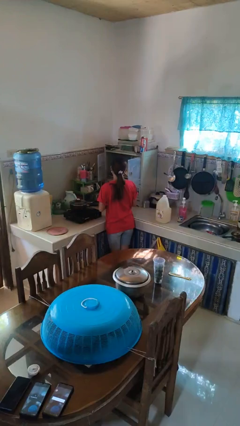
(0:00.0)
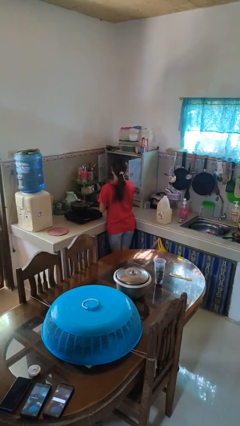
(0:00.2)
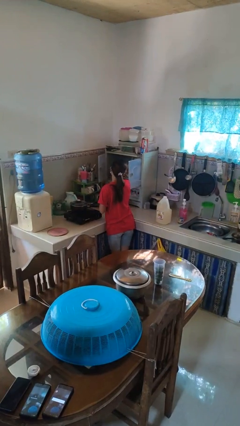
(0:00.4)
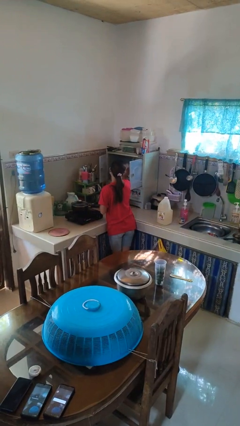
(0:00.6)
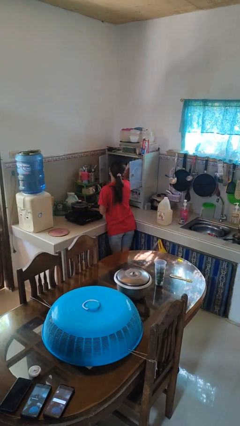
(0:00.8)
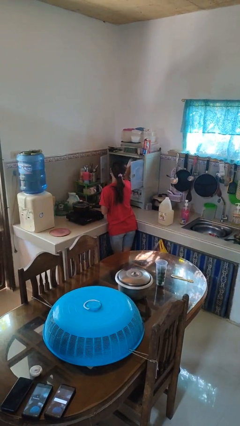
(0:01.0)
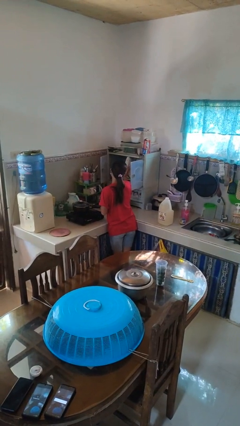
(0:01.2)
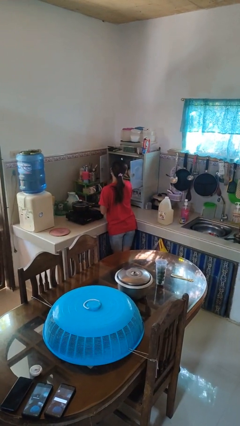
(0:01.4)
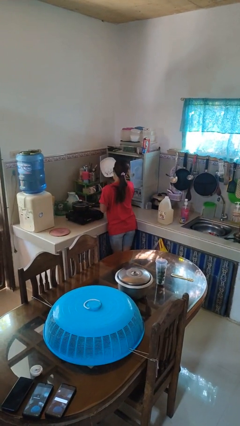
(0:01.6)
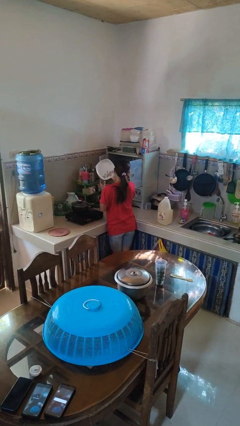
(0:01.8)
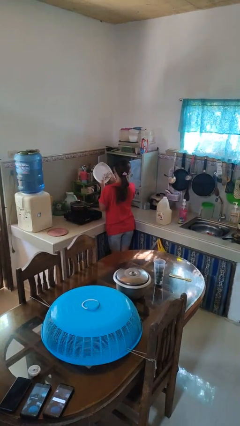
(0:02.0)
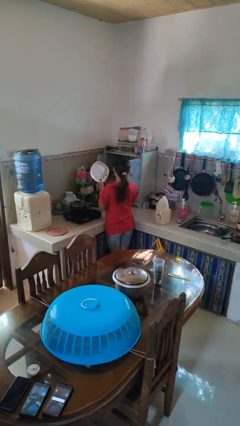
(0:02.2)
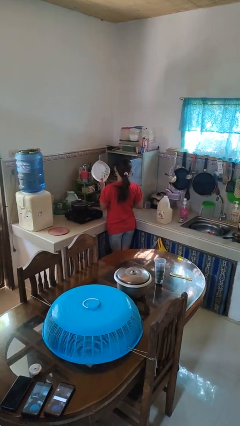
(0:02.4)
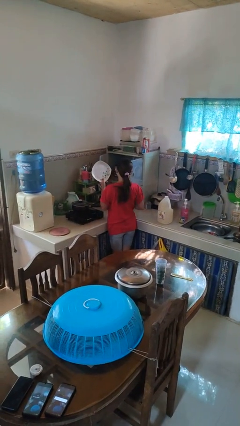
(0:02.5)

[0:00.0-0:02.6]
person takes object from cabinet

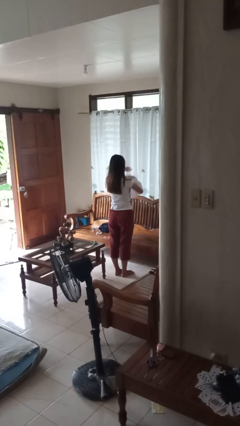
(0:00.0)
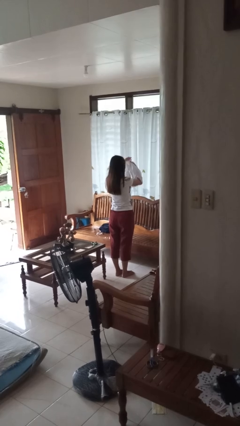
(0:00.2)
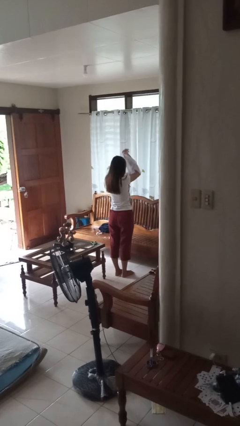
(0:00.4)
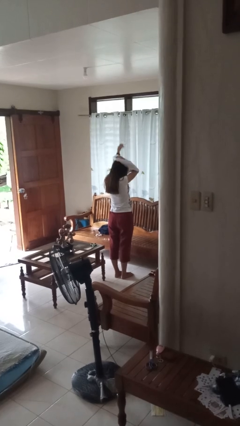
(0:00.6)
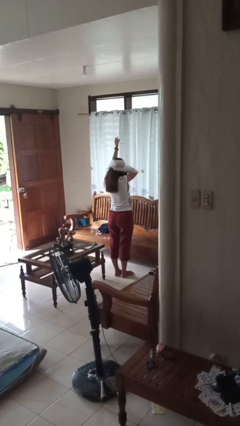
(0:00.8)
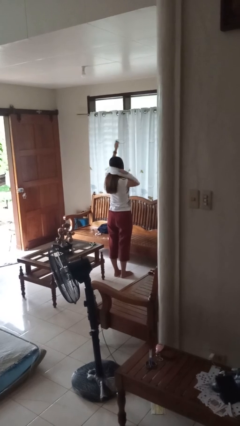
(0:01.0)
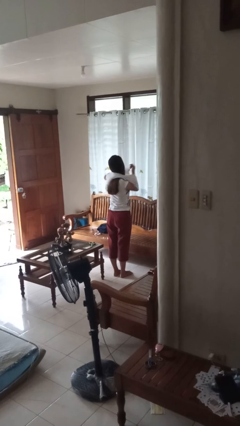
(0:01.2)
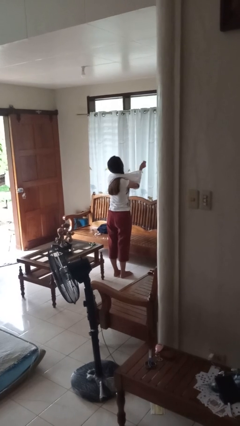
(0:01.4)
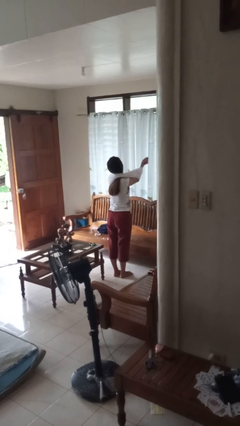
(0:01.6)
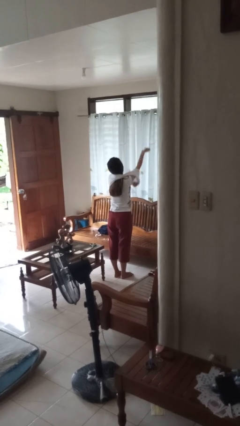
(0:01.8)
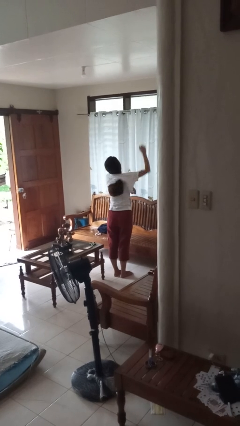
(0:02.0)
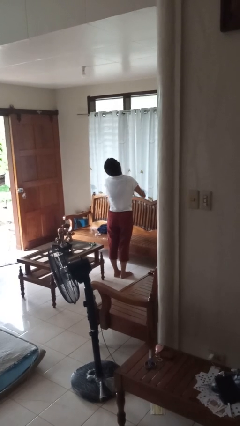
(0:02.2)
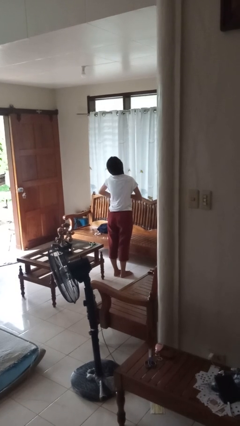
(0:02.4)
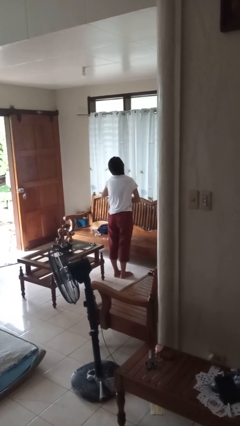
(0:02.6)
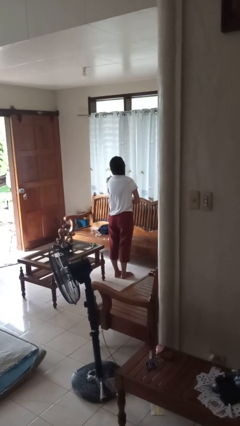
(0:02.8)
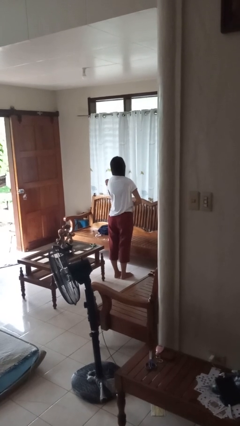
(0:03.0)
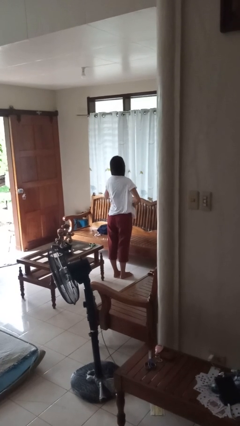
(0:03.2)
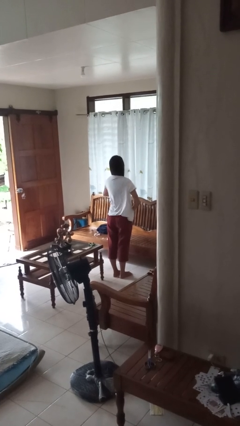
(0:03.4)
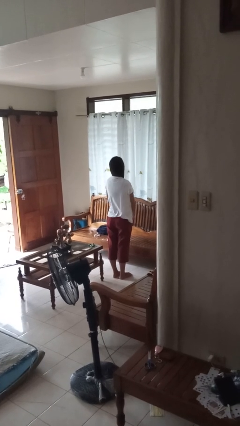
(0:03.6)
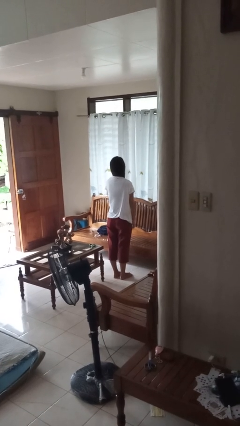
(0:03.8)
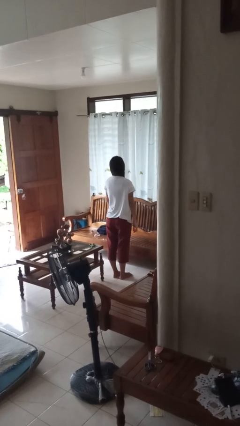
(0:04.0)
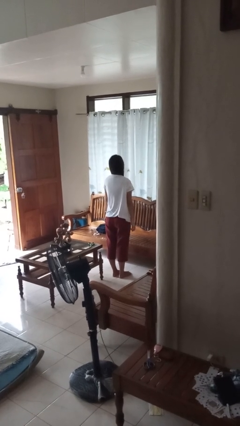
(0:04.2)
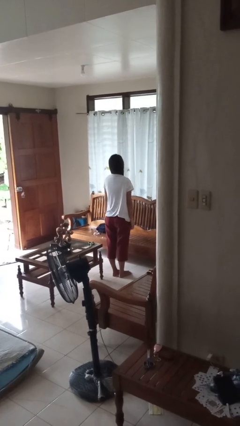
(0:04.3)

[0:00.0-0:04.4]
person puts on shirt

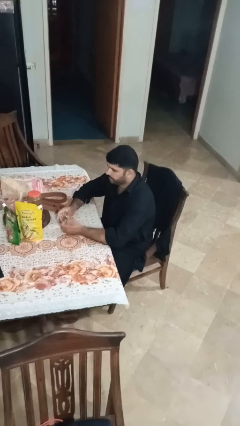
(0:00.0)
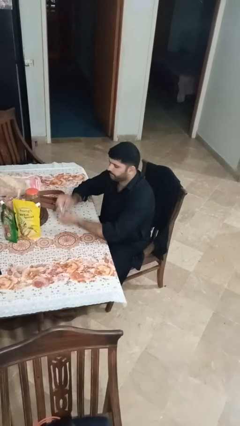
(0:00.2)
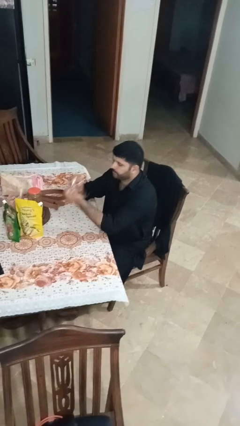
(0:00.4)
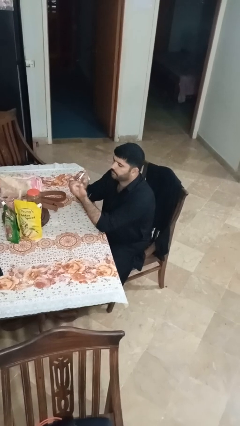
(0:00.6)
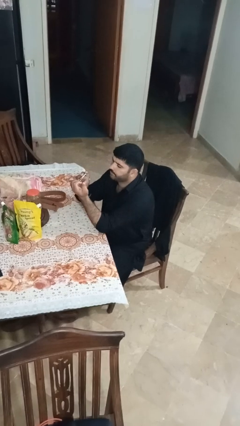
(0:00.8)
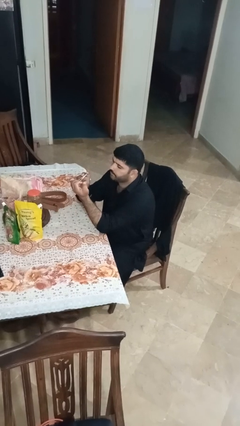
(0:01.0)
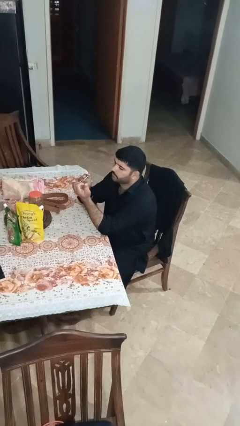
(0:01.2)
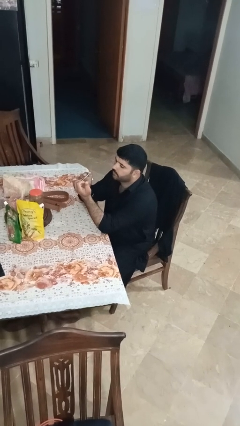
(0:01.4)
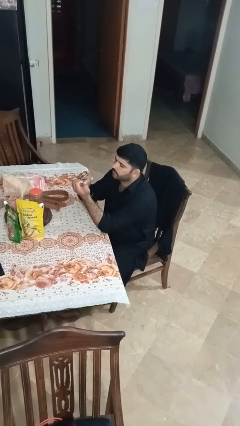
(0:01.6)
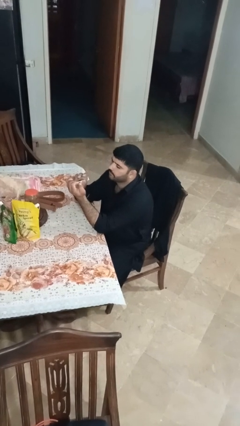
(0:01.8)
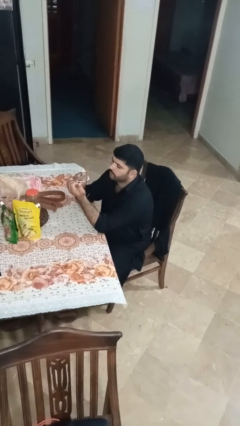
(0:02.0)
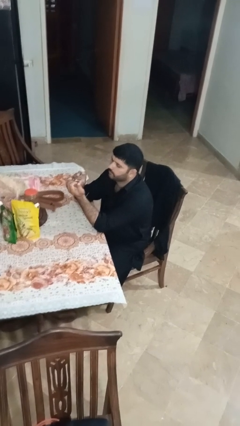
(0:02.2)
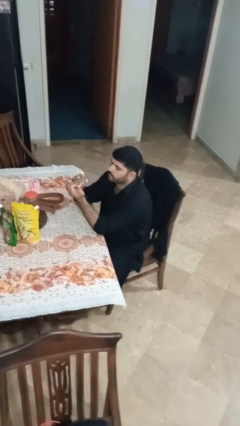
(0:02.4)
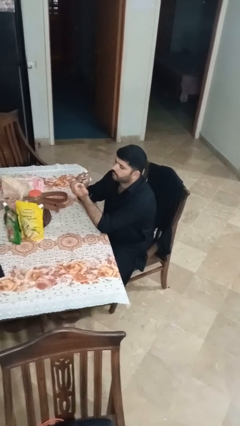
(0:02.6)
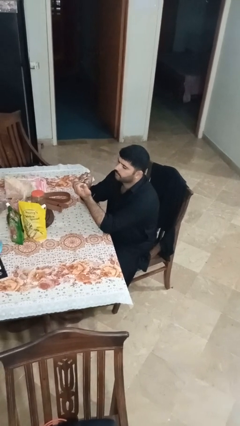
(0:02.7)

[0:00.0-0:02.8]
person clips fingernails

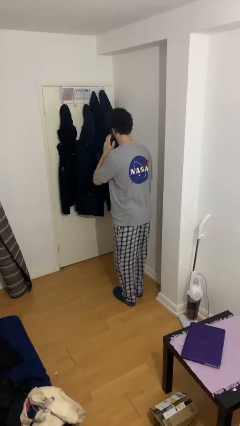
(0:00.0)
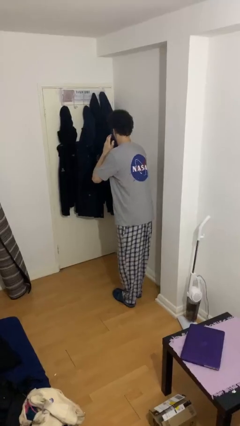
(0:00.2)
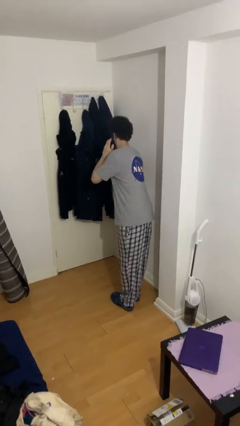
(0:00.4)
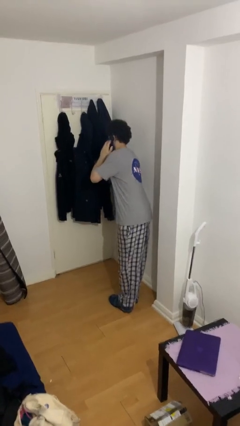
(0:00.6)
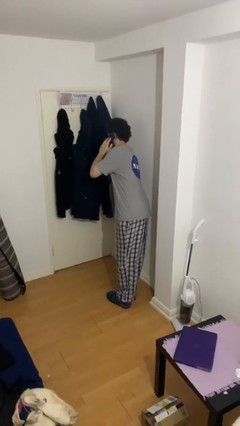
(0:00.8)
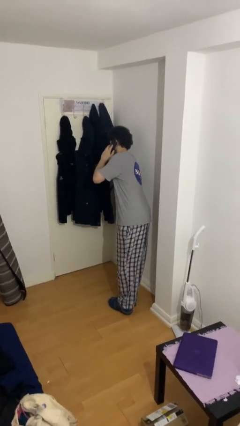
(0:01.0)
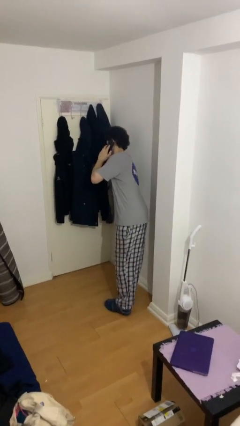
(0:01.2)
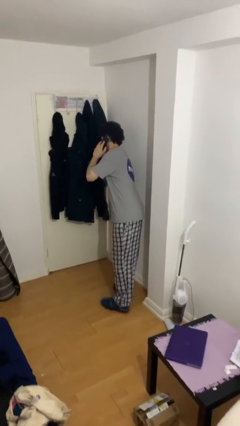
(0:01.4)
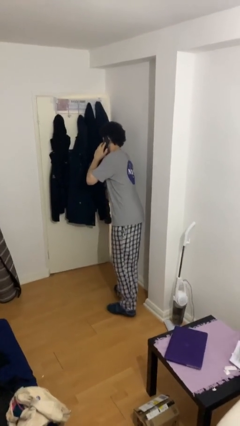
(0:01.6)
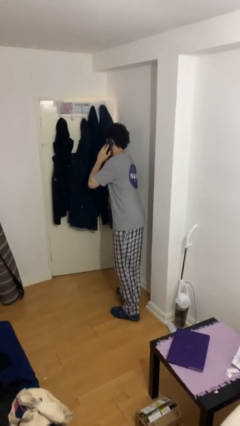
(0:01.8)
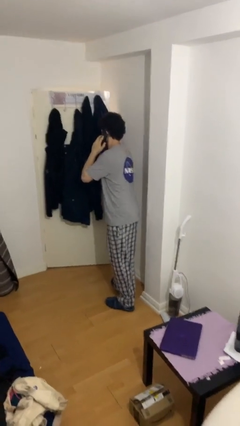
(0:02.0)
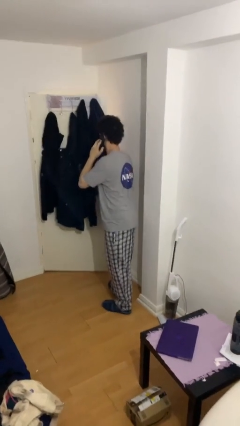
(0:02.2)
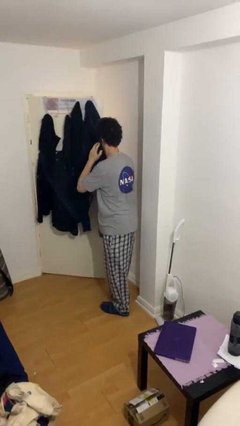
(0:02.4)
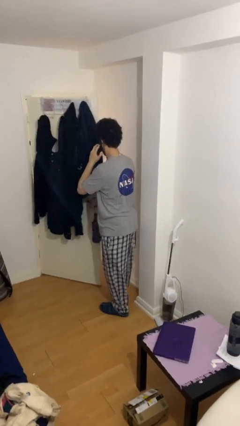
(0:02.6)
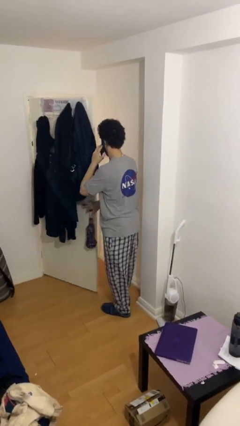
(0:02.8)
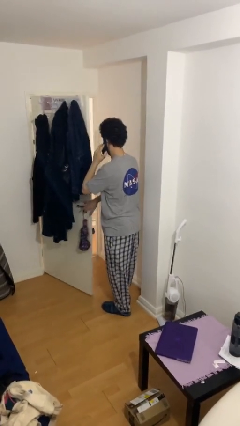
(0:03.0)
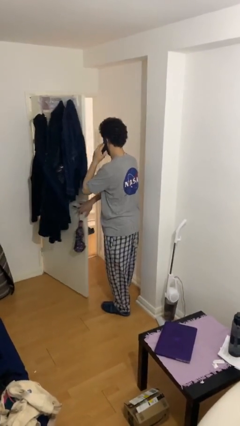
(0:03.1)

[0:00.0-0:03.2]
person opens facility door

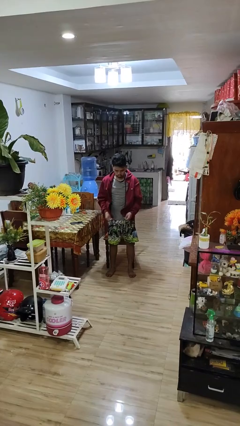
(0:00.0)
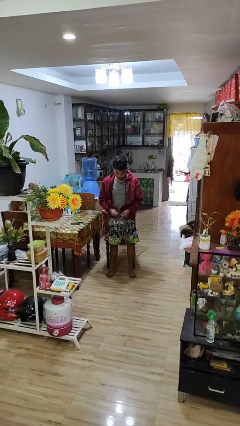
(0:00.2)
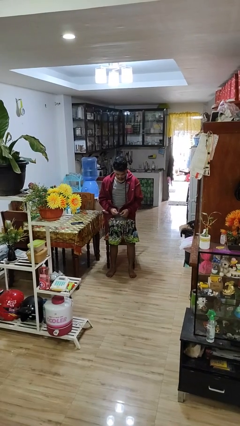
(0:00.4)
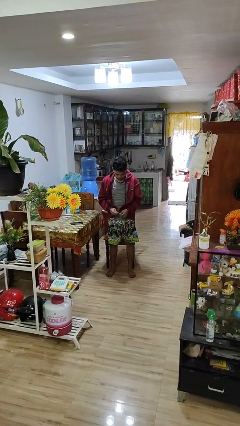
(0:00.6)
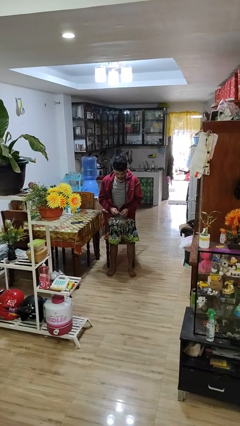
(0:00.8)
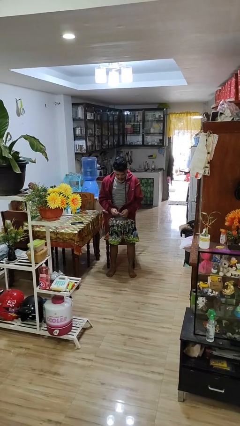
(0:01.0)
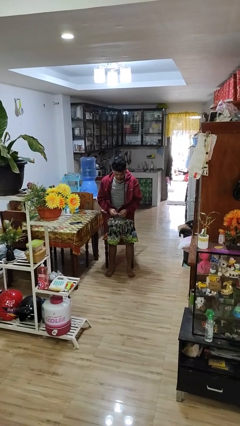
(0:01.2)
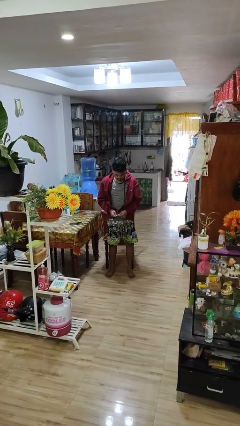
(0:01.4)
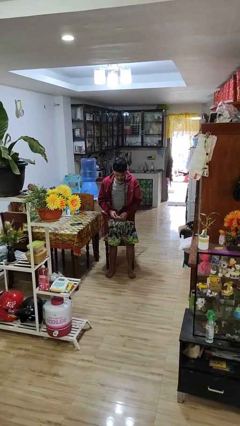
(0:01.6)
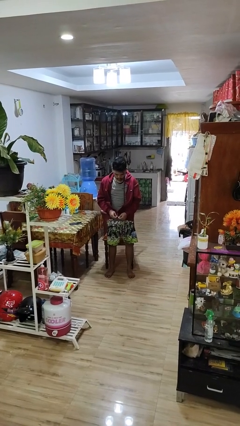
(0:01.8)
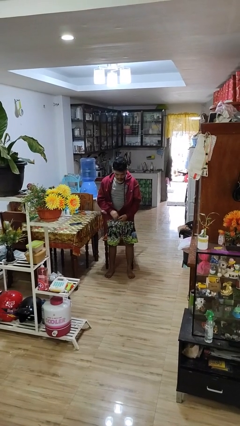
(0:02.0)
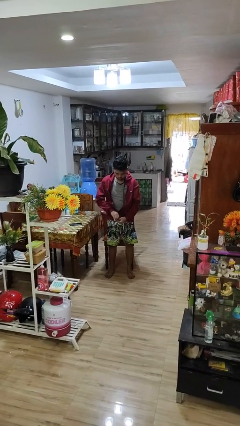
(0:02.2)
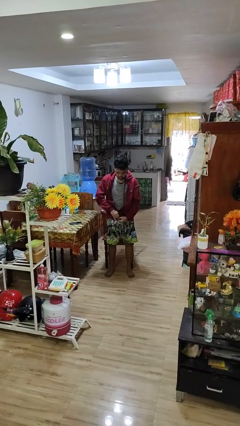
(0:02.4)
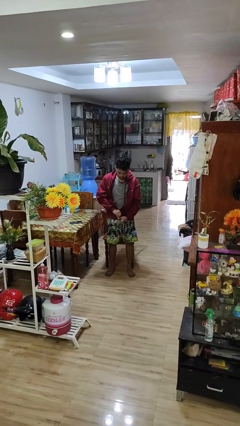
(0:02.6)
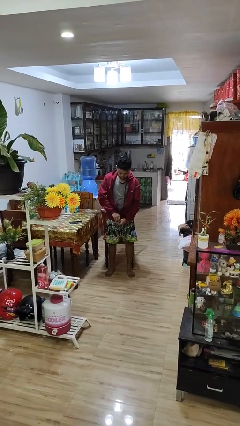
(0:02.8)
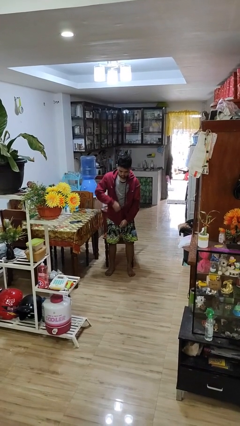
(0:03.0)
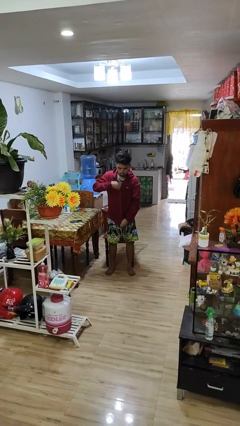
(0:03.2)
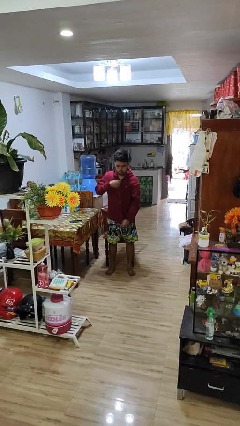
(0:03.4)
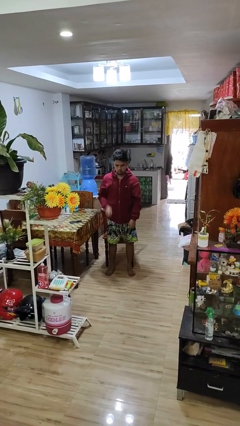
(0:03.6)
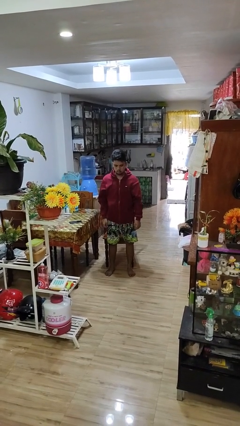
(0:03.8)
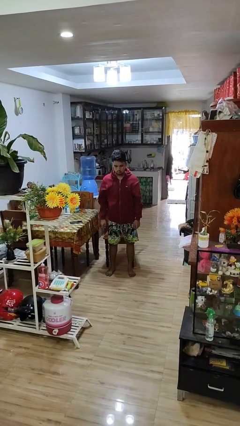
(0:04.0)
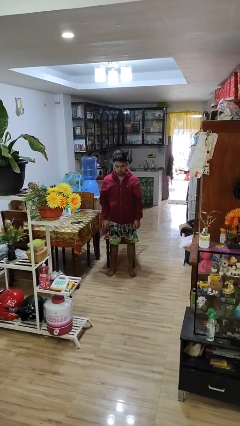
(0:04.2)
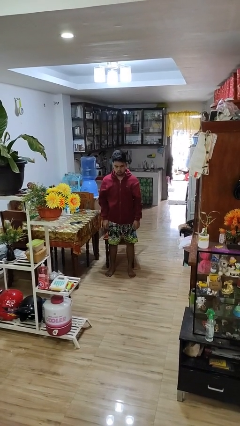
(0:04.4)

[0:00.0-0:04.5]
person zips up jacket

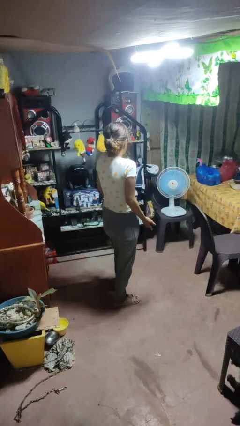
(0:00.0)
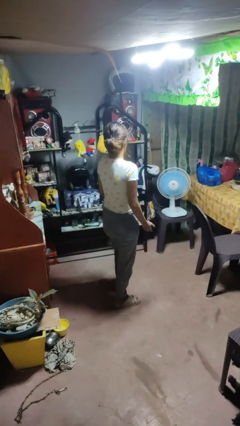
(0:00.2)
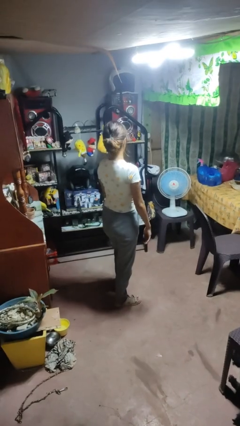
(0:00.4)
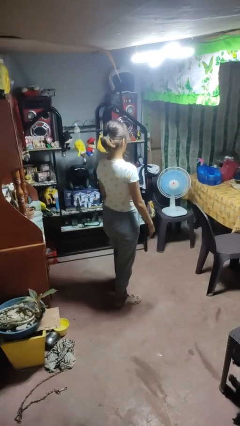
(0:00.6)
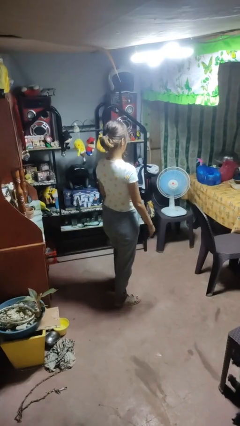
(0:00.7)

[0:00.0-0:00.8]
person shrugs
